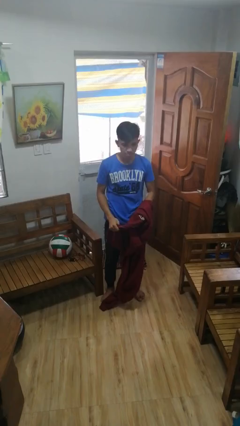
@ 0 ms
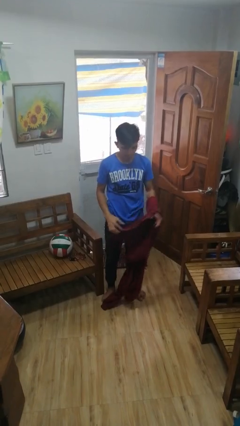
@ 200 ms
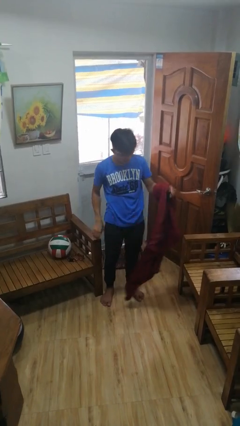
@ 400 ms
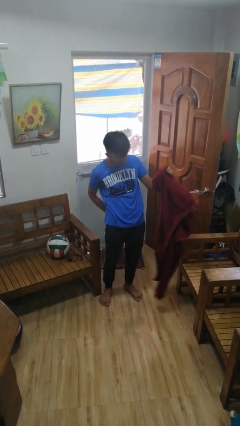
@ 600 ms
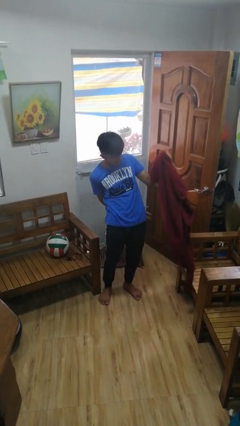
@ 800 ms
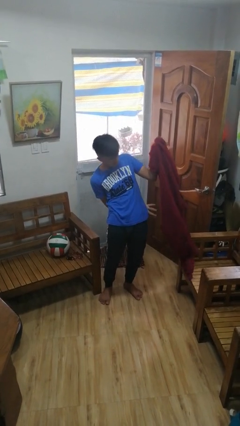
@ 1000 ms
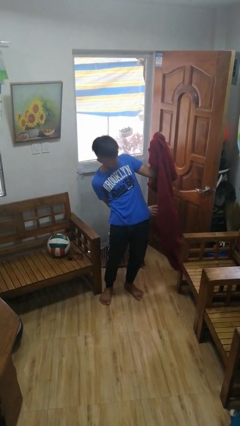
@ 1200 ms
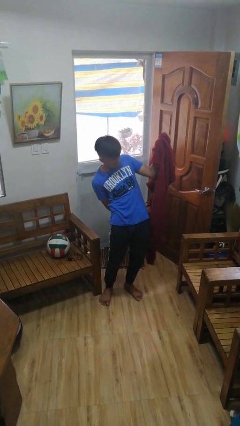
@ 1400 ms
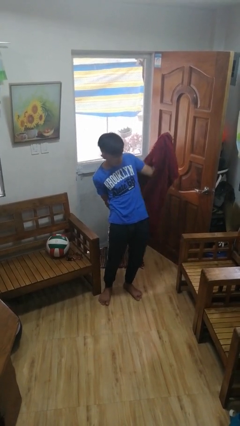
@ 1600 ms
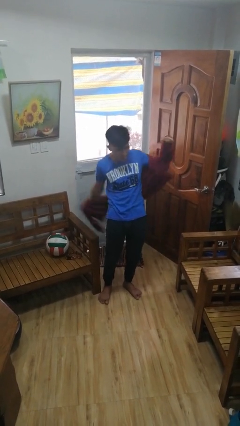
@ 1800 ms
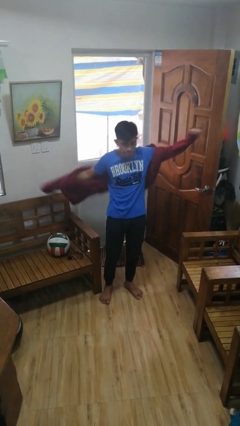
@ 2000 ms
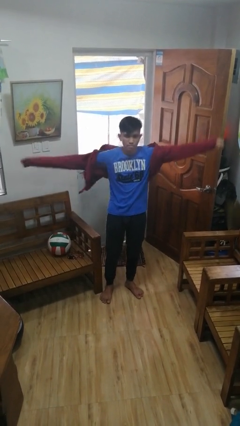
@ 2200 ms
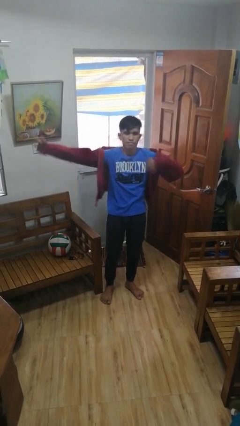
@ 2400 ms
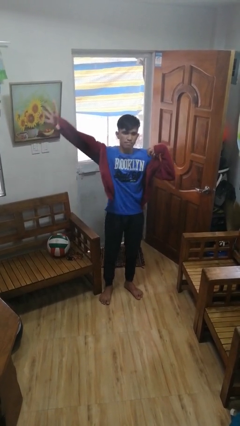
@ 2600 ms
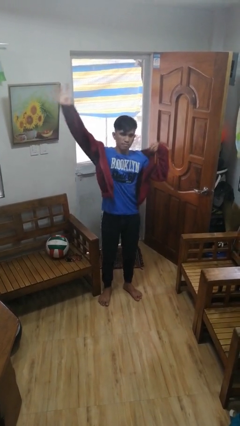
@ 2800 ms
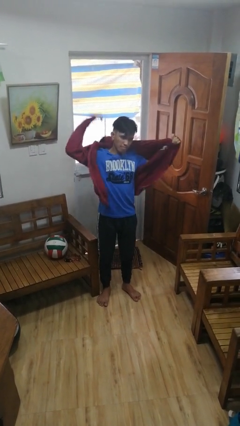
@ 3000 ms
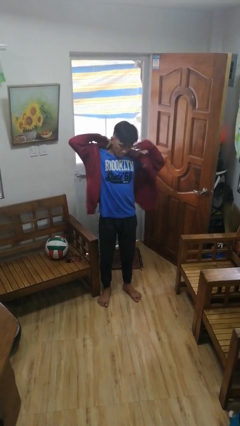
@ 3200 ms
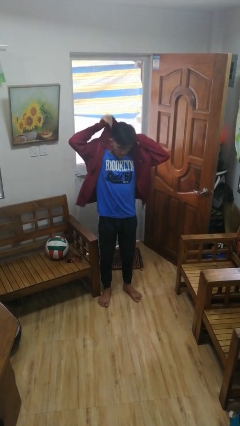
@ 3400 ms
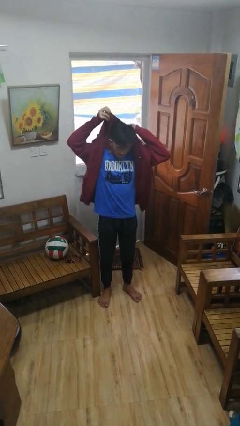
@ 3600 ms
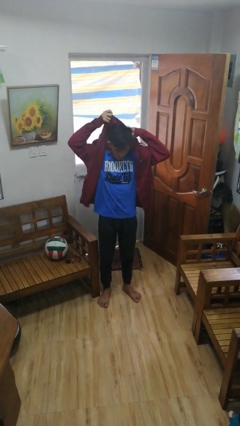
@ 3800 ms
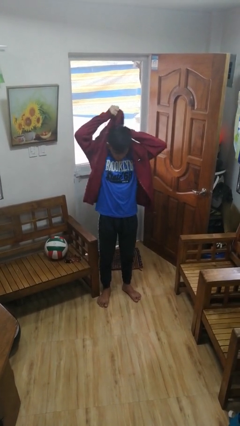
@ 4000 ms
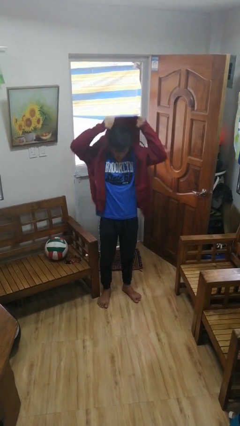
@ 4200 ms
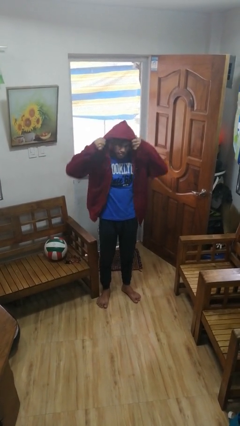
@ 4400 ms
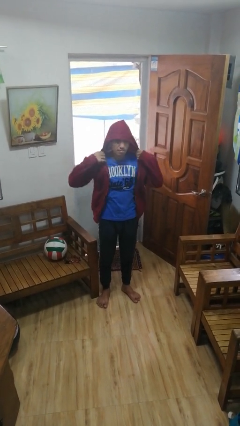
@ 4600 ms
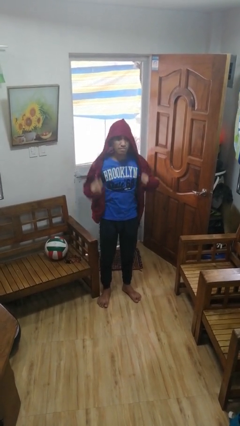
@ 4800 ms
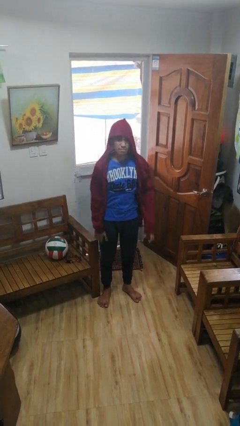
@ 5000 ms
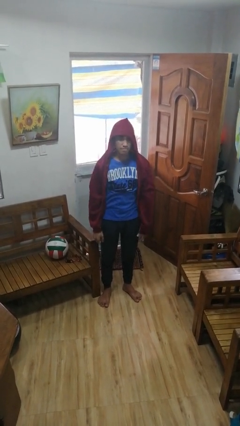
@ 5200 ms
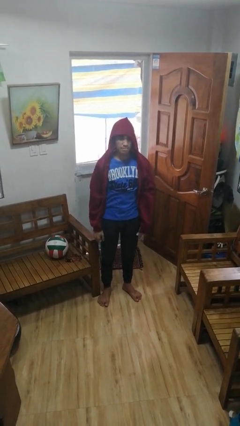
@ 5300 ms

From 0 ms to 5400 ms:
person puts on hoodie

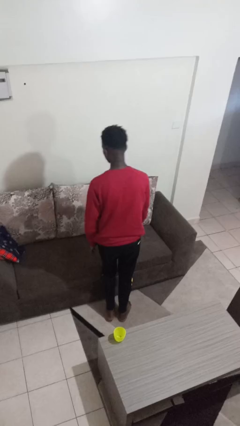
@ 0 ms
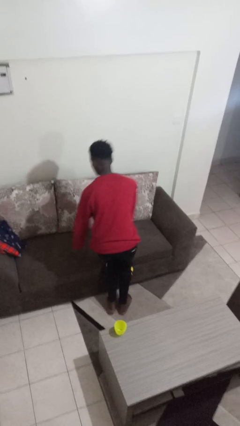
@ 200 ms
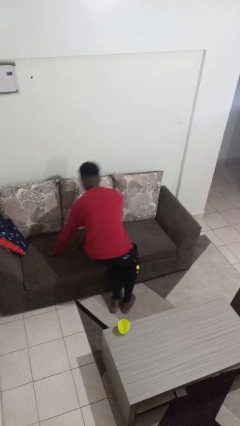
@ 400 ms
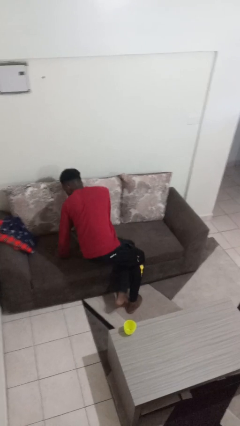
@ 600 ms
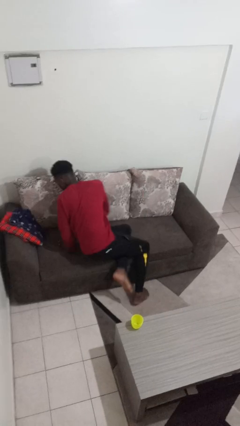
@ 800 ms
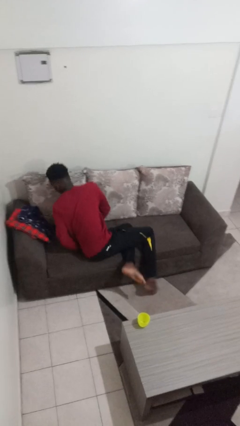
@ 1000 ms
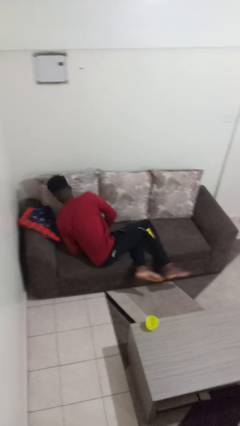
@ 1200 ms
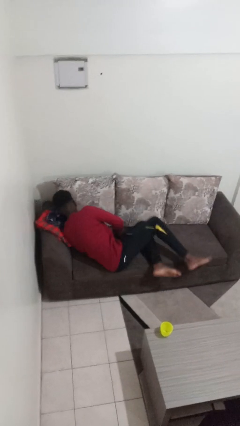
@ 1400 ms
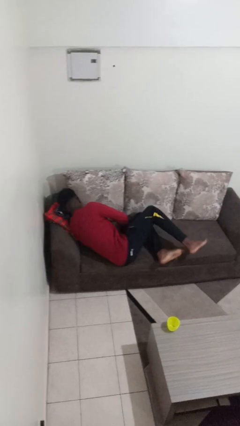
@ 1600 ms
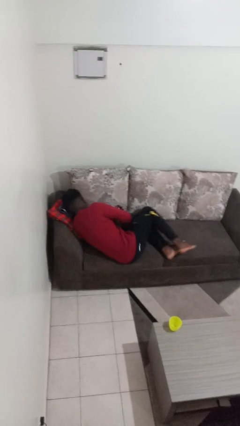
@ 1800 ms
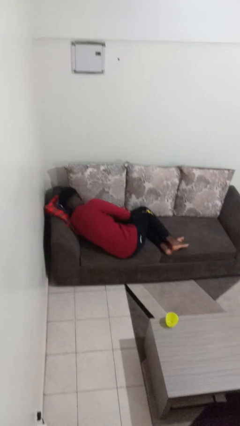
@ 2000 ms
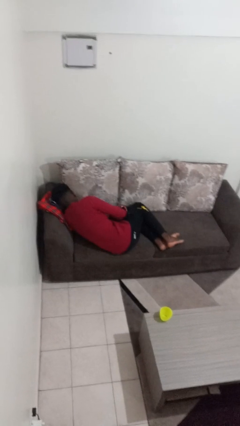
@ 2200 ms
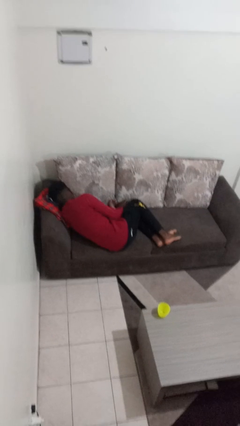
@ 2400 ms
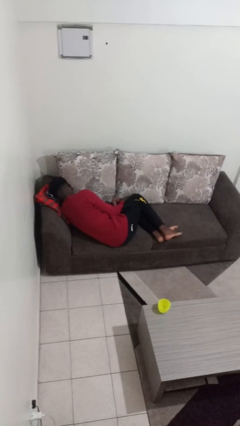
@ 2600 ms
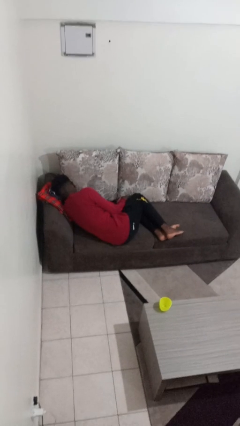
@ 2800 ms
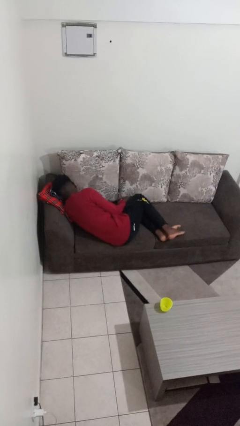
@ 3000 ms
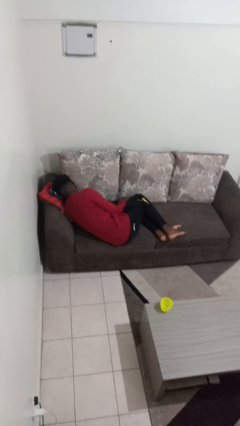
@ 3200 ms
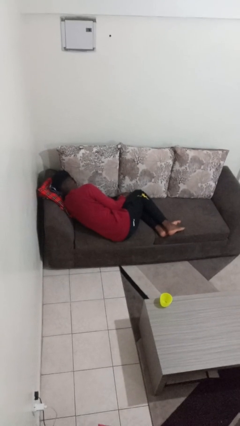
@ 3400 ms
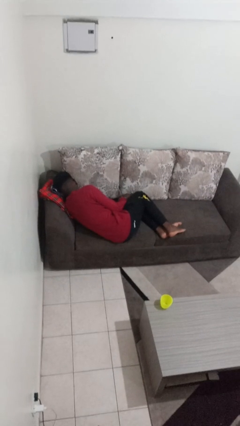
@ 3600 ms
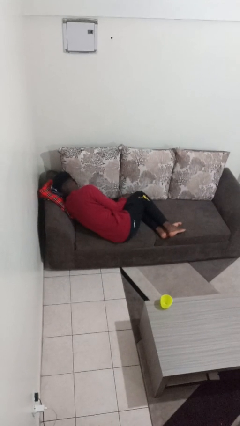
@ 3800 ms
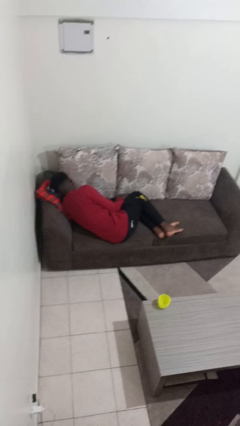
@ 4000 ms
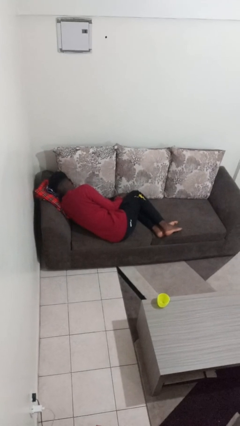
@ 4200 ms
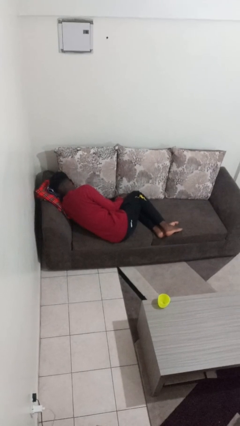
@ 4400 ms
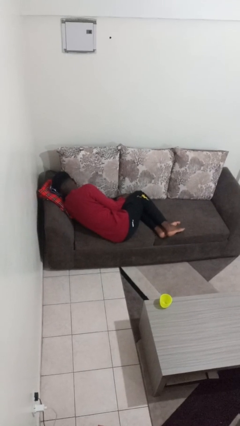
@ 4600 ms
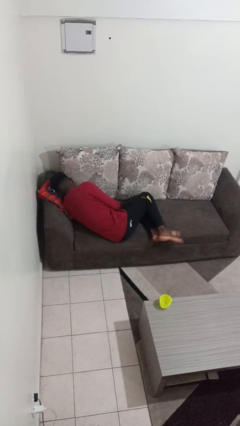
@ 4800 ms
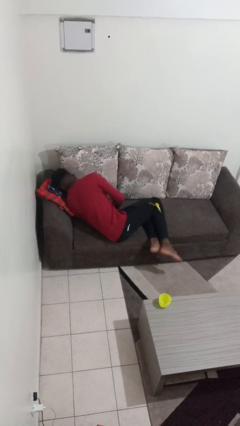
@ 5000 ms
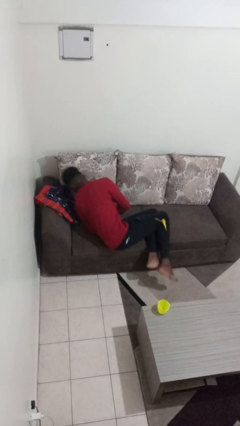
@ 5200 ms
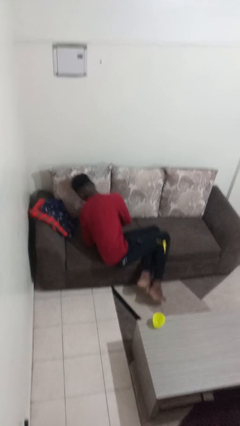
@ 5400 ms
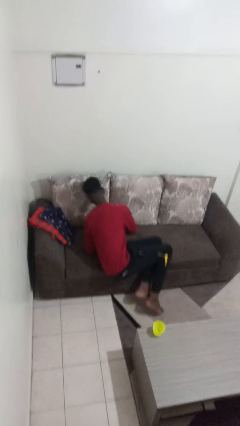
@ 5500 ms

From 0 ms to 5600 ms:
person lies down on couch

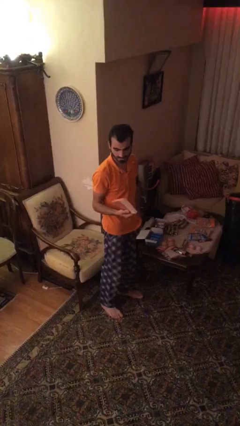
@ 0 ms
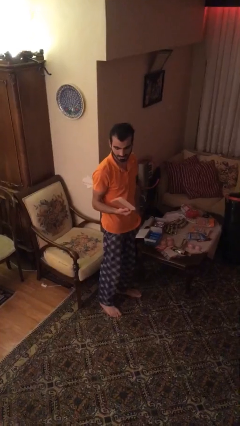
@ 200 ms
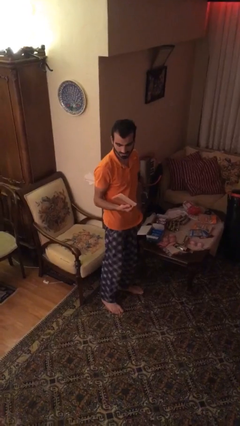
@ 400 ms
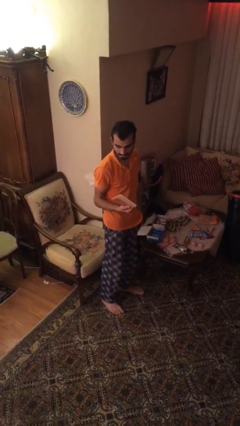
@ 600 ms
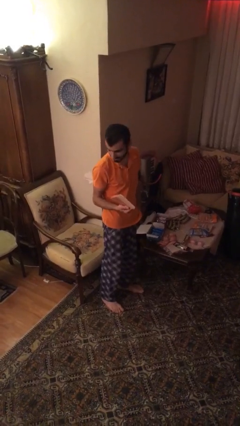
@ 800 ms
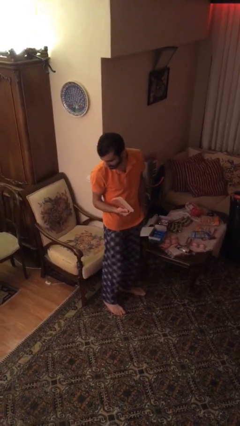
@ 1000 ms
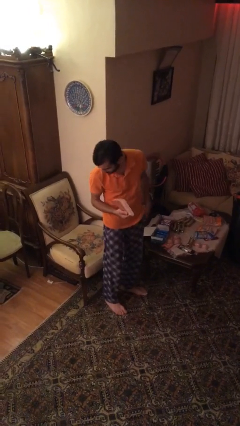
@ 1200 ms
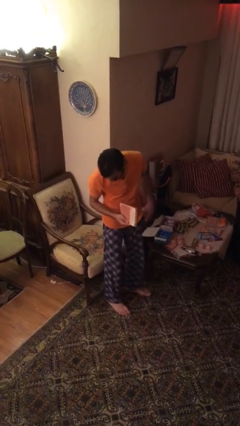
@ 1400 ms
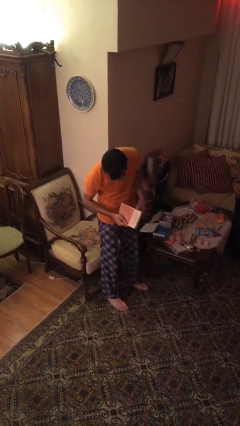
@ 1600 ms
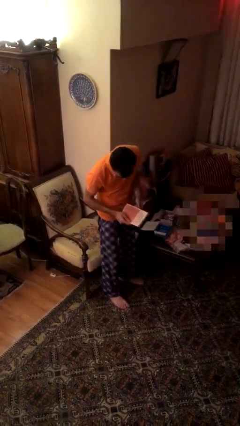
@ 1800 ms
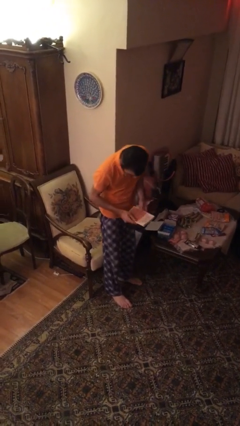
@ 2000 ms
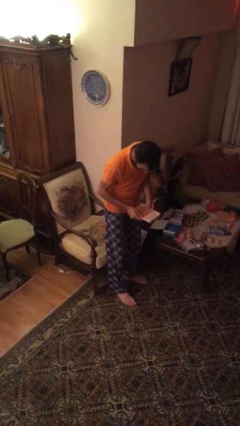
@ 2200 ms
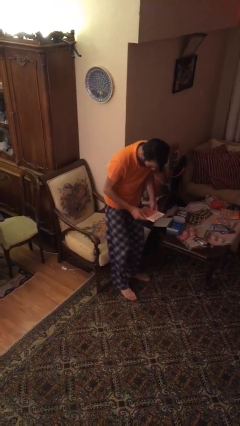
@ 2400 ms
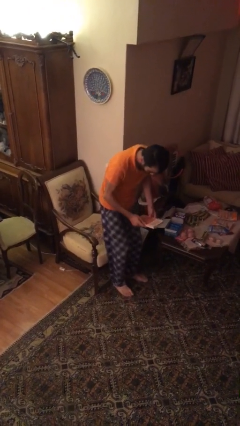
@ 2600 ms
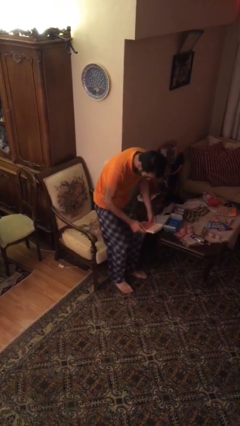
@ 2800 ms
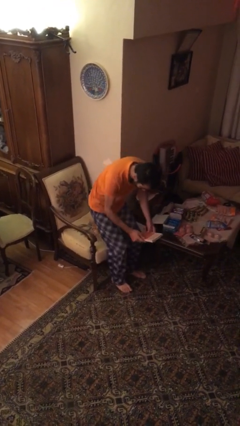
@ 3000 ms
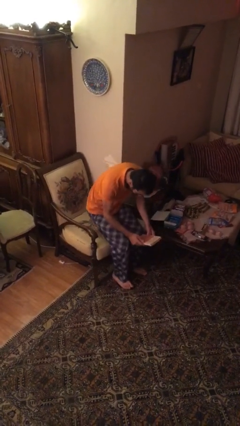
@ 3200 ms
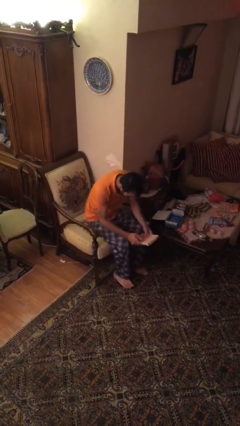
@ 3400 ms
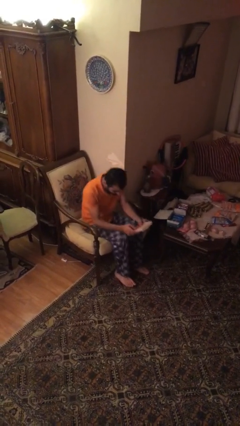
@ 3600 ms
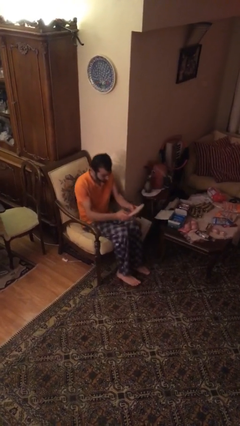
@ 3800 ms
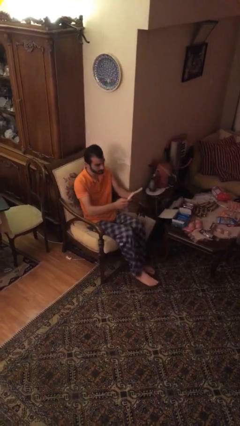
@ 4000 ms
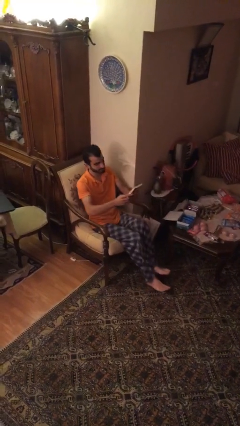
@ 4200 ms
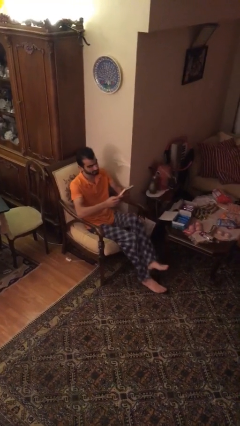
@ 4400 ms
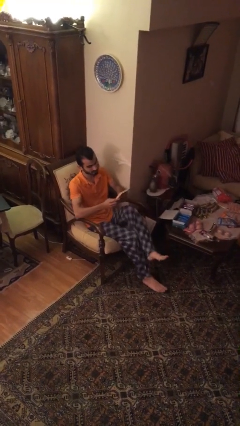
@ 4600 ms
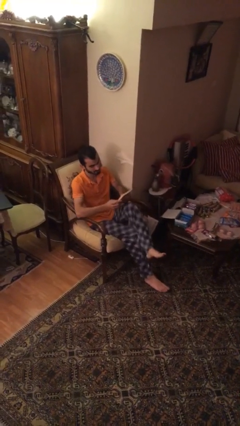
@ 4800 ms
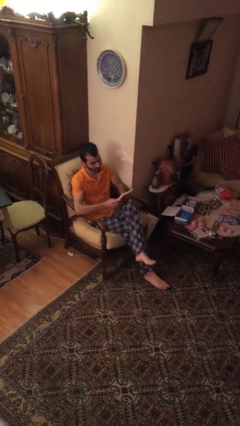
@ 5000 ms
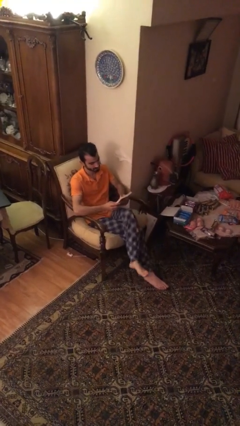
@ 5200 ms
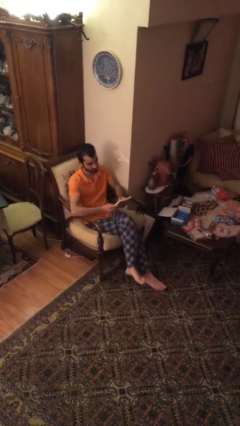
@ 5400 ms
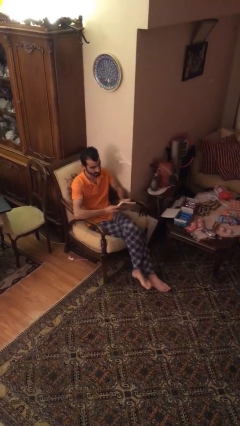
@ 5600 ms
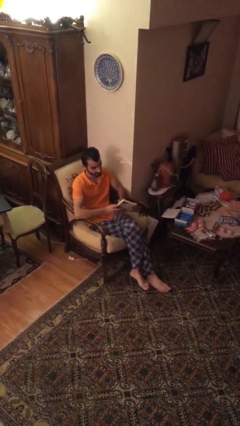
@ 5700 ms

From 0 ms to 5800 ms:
person sits down

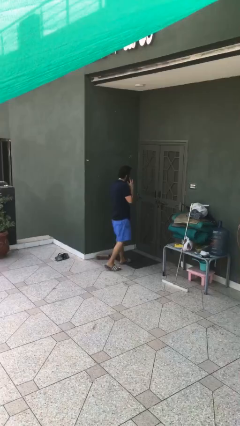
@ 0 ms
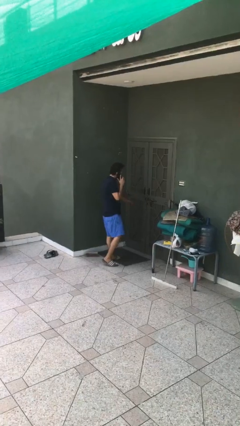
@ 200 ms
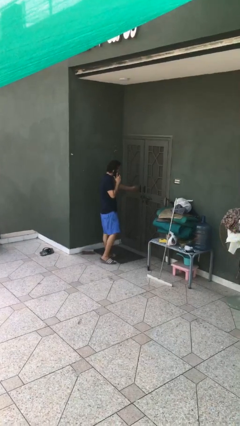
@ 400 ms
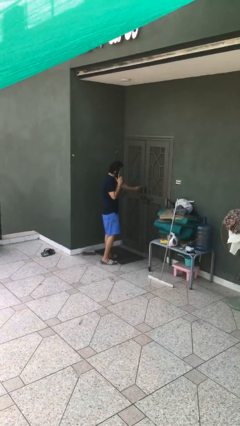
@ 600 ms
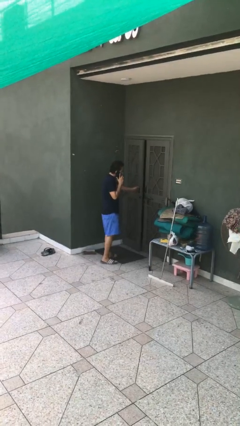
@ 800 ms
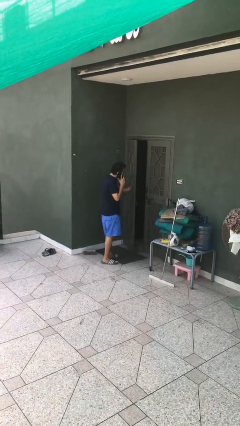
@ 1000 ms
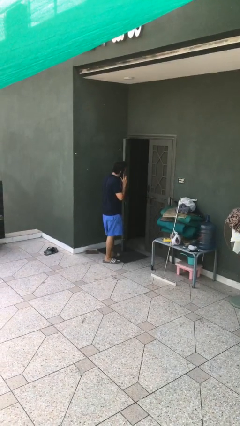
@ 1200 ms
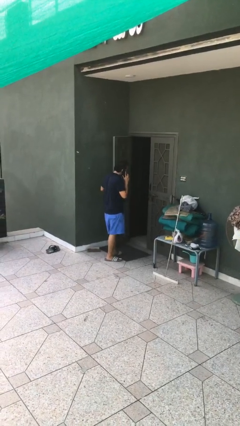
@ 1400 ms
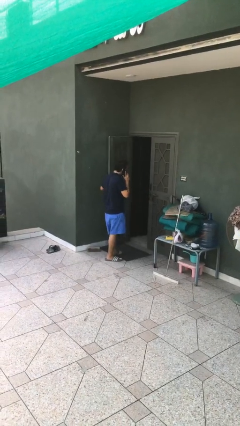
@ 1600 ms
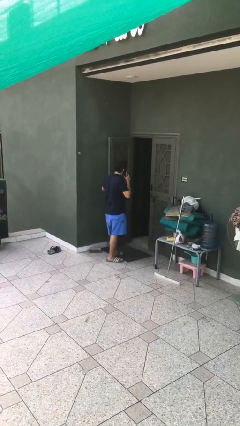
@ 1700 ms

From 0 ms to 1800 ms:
person opens facility door
